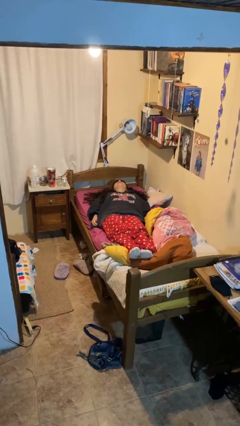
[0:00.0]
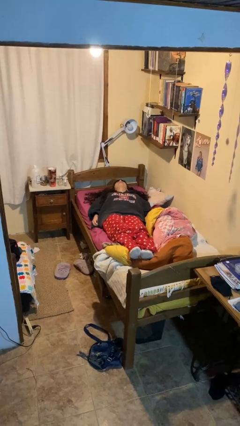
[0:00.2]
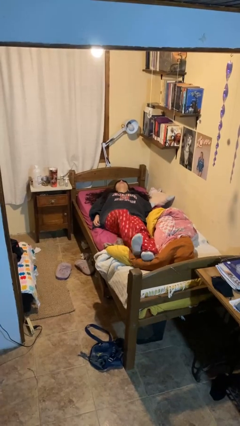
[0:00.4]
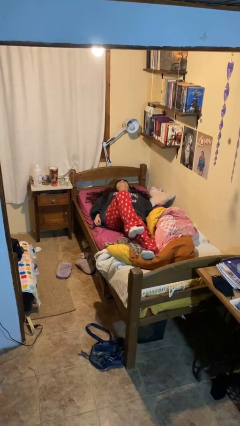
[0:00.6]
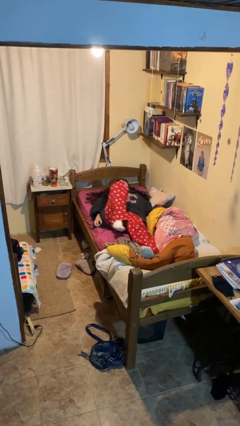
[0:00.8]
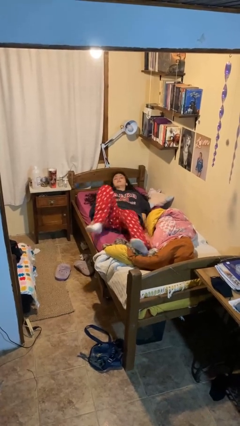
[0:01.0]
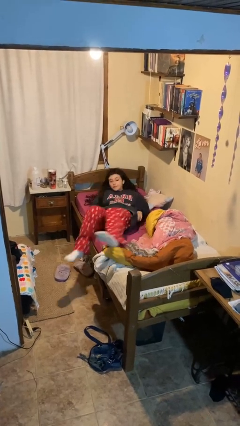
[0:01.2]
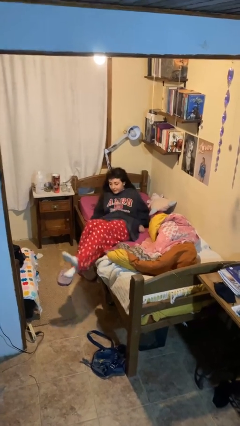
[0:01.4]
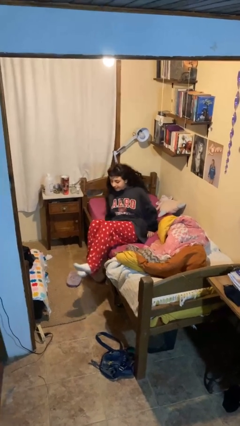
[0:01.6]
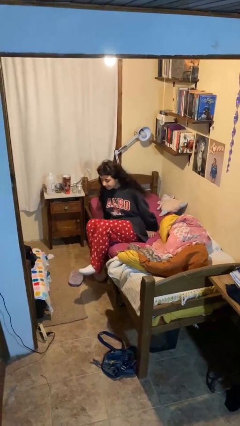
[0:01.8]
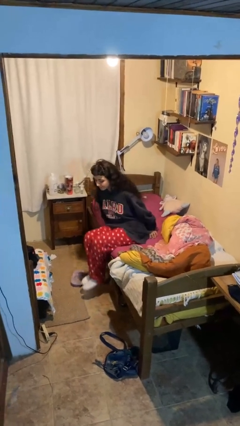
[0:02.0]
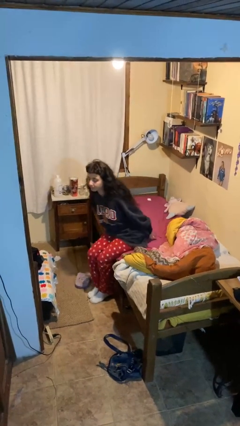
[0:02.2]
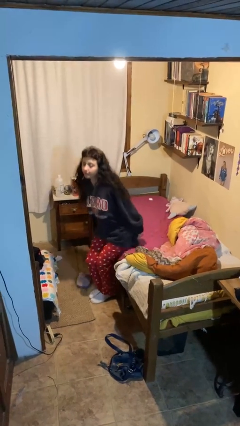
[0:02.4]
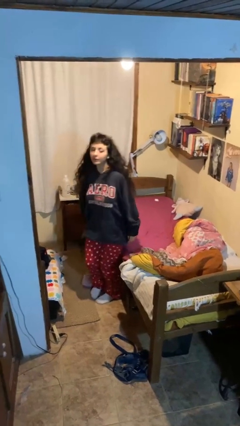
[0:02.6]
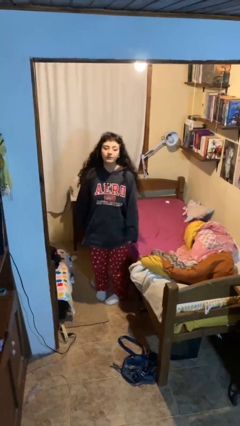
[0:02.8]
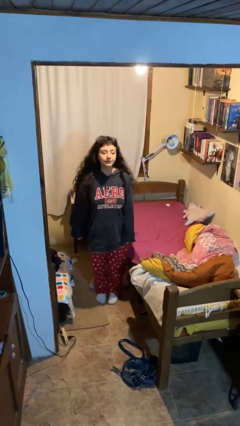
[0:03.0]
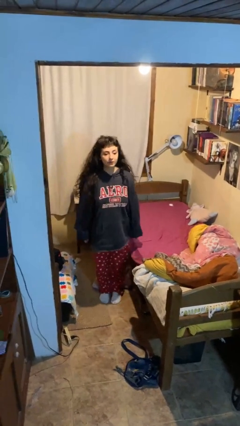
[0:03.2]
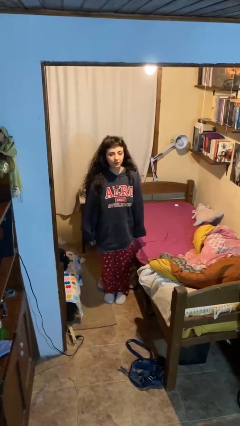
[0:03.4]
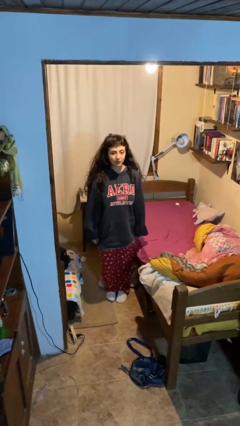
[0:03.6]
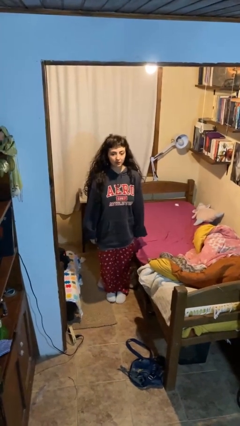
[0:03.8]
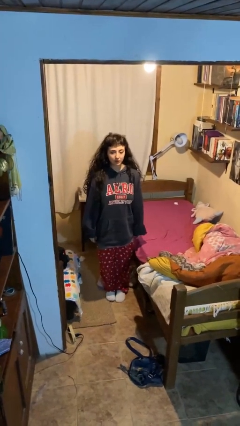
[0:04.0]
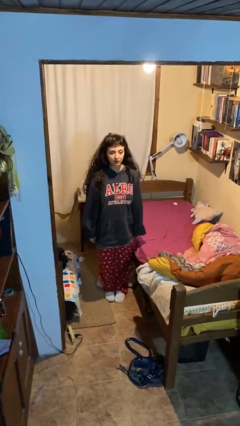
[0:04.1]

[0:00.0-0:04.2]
person stands up

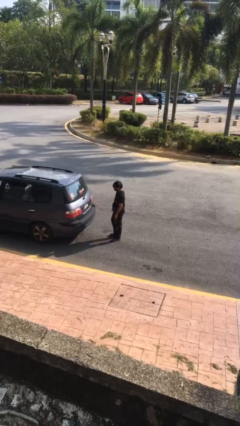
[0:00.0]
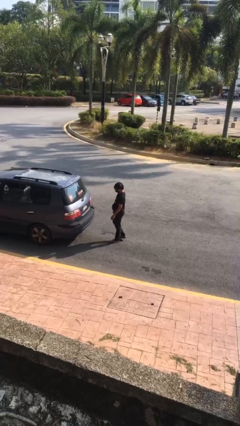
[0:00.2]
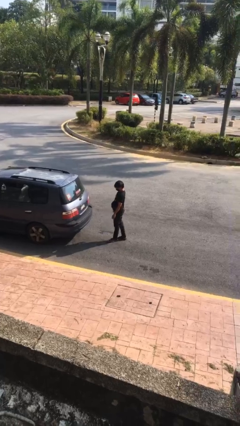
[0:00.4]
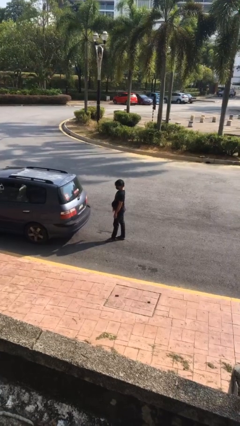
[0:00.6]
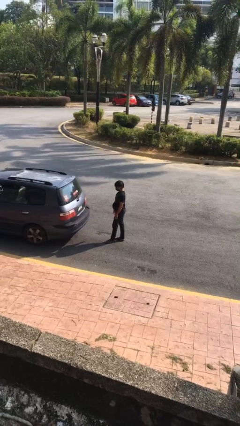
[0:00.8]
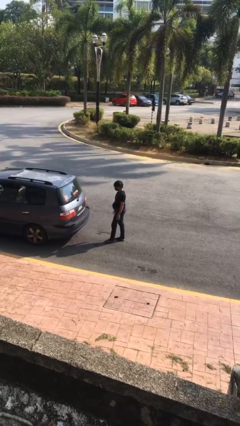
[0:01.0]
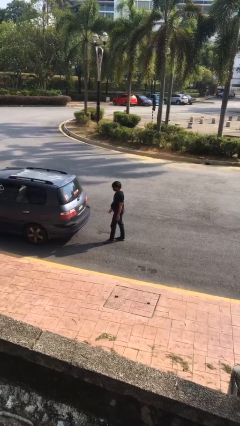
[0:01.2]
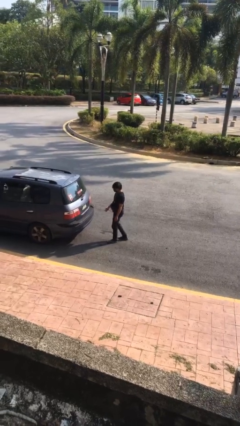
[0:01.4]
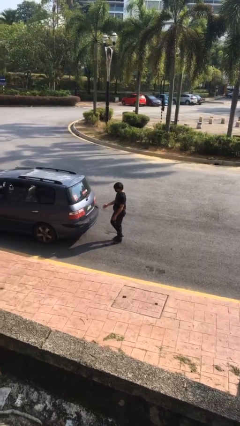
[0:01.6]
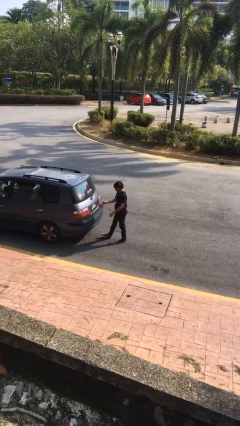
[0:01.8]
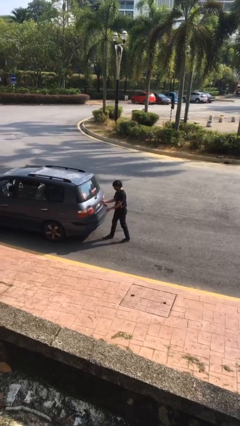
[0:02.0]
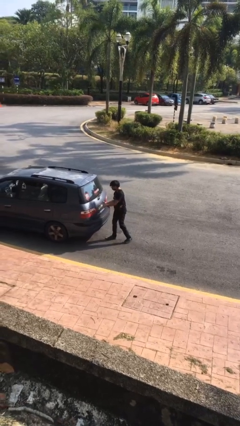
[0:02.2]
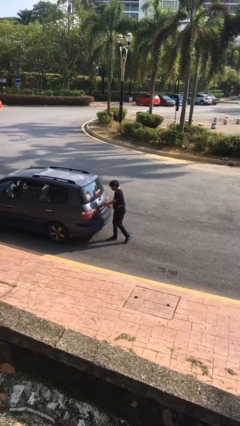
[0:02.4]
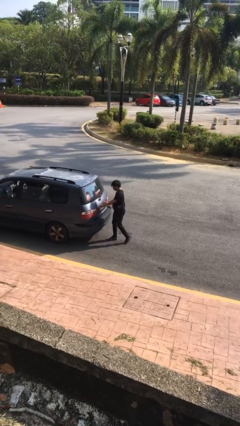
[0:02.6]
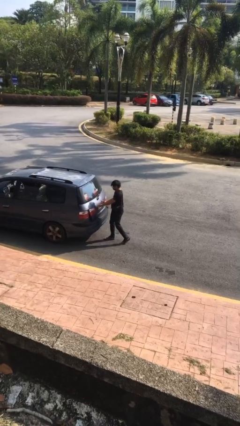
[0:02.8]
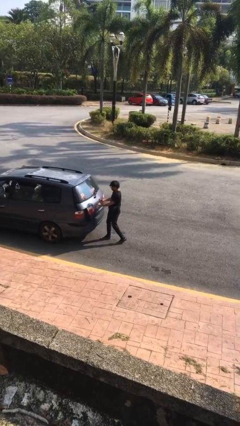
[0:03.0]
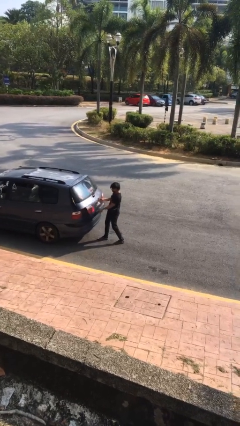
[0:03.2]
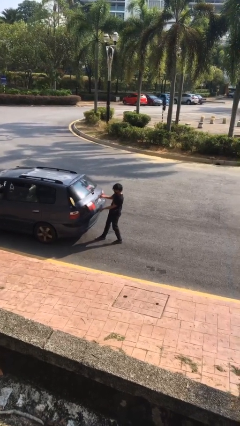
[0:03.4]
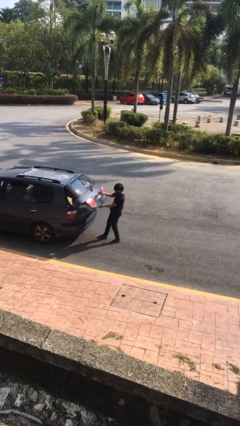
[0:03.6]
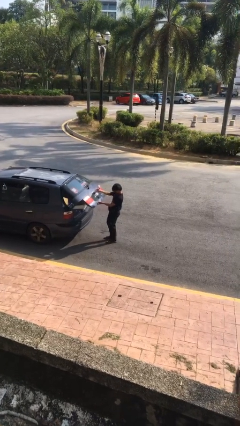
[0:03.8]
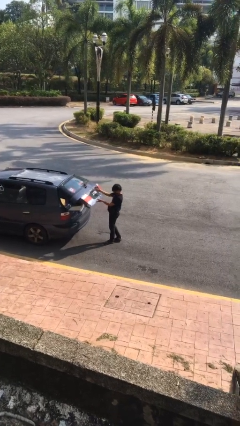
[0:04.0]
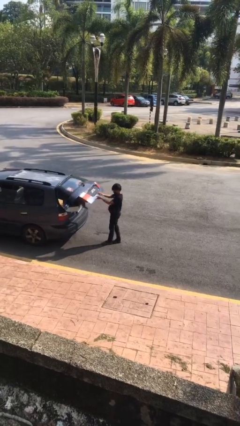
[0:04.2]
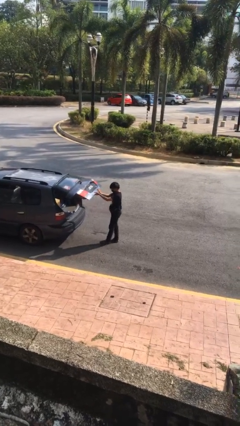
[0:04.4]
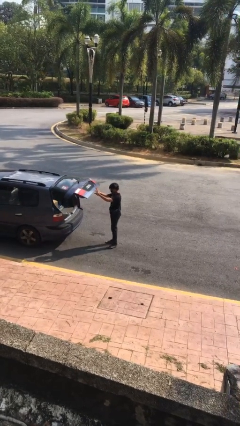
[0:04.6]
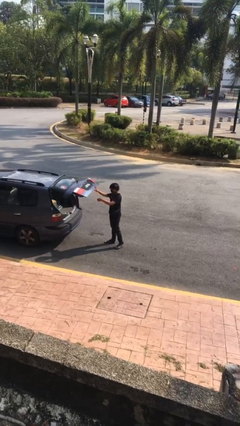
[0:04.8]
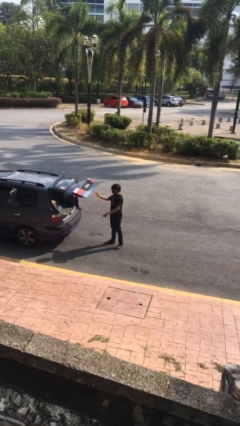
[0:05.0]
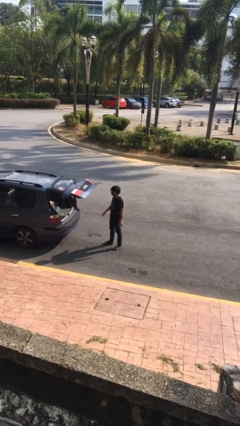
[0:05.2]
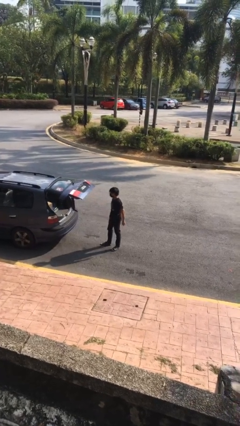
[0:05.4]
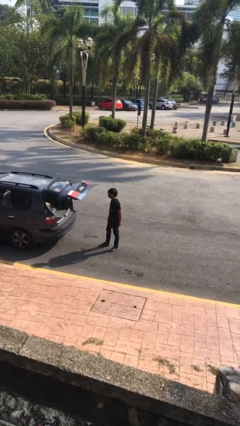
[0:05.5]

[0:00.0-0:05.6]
person opens car trunk

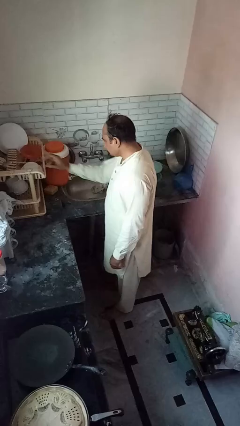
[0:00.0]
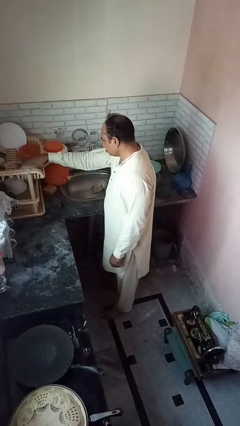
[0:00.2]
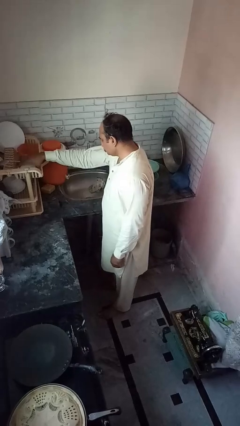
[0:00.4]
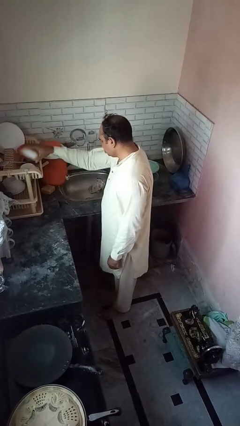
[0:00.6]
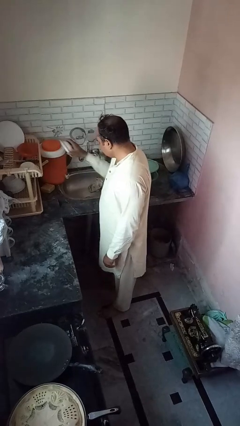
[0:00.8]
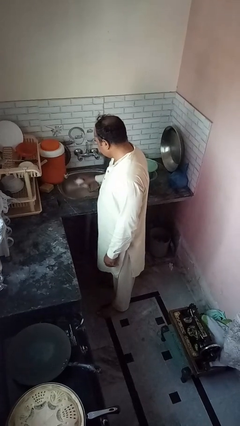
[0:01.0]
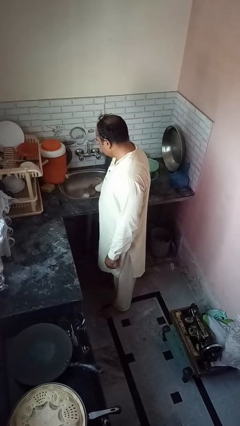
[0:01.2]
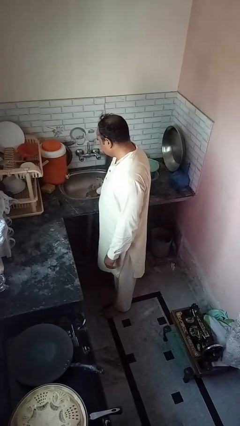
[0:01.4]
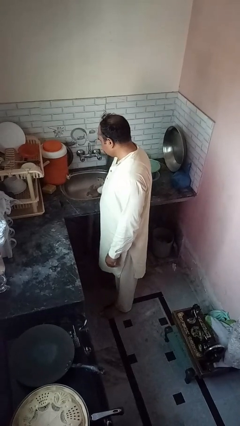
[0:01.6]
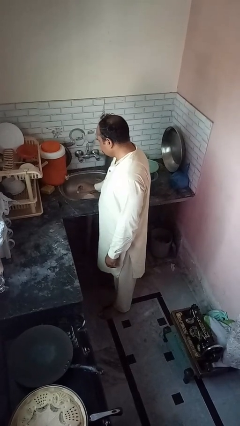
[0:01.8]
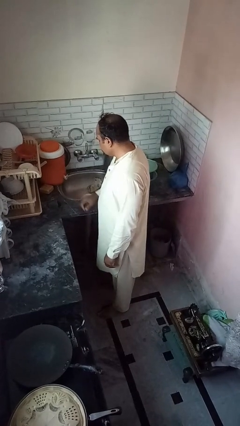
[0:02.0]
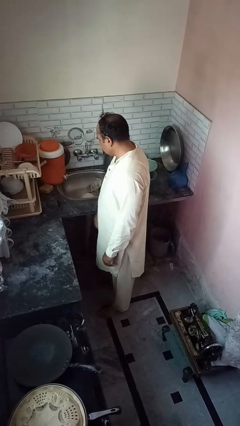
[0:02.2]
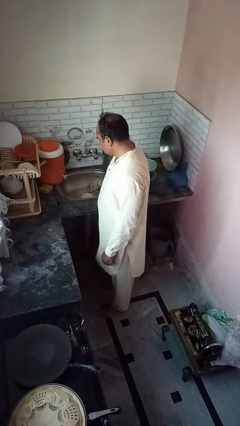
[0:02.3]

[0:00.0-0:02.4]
person loads dishwasher

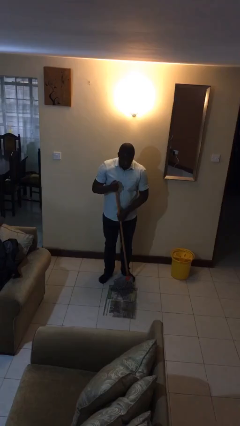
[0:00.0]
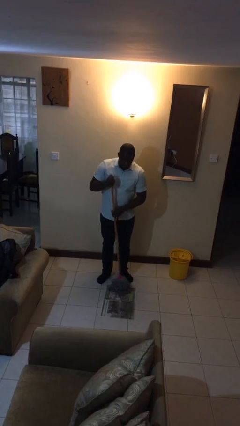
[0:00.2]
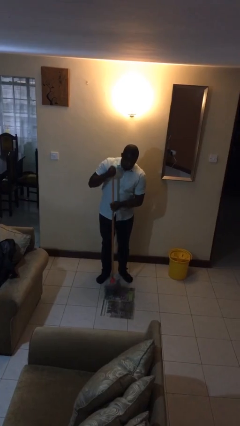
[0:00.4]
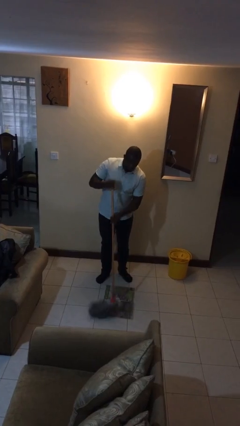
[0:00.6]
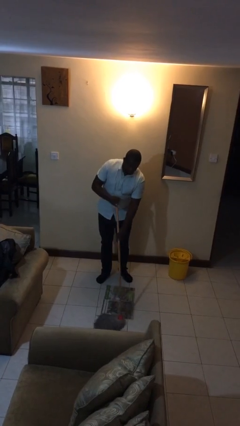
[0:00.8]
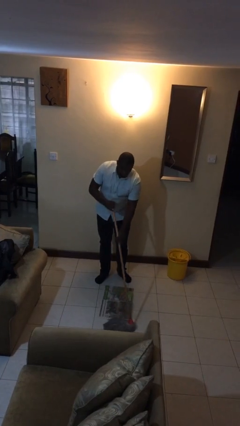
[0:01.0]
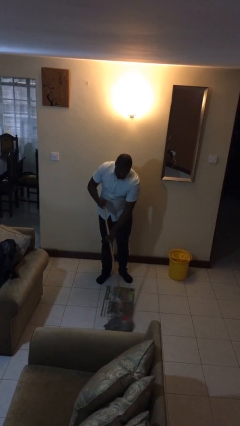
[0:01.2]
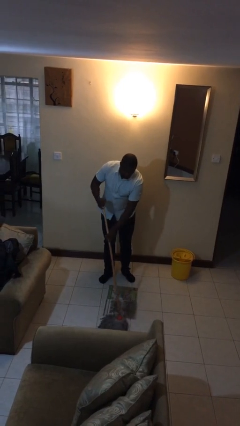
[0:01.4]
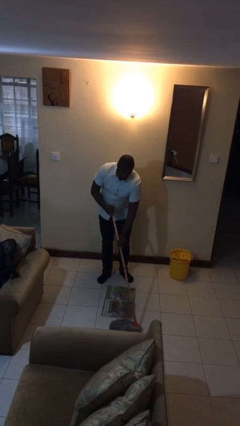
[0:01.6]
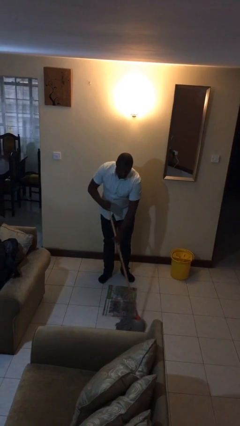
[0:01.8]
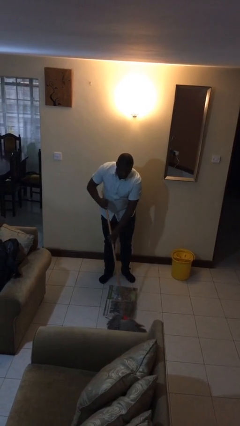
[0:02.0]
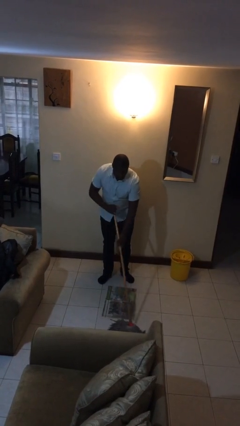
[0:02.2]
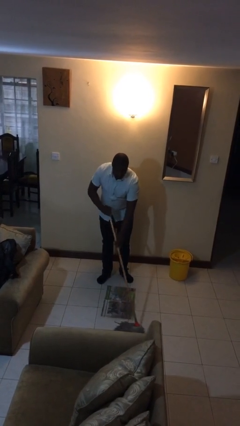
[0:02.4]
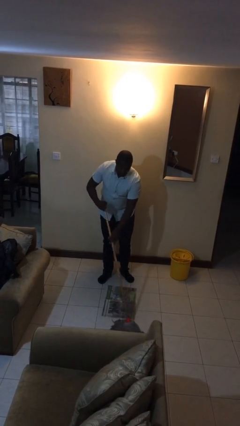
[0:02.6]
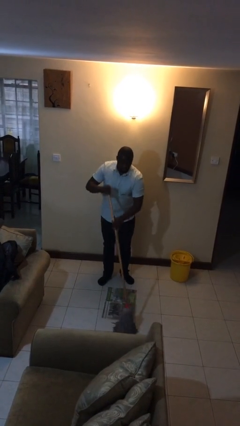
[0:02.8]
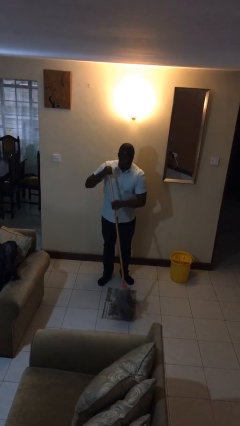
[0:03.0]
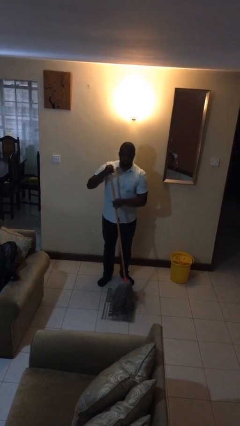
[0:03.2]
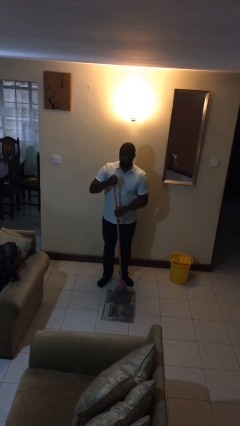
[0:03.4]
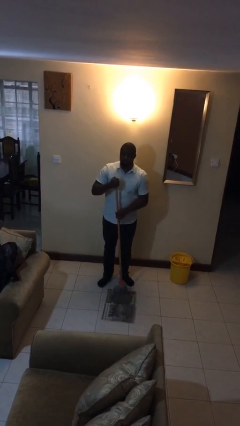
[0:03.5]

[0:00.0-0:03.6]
person mops

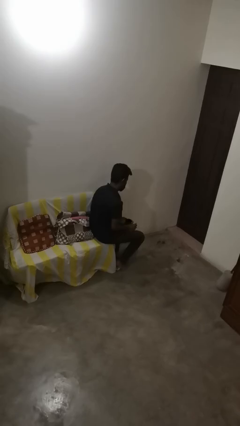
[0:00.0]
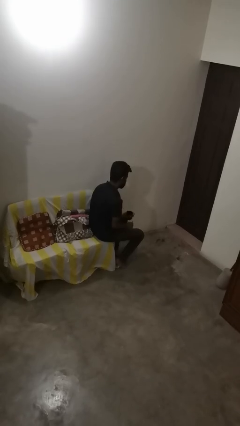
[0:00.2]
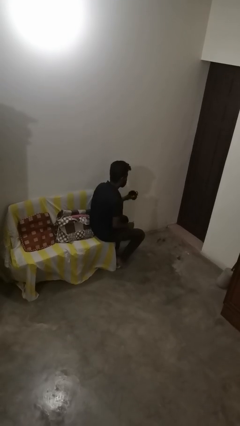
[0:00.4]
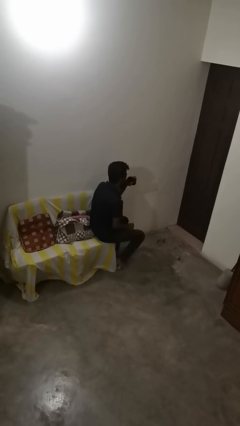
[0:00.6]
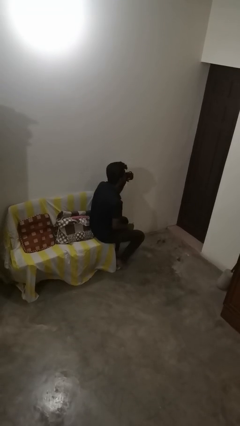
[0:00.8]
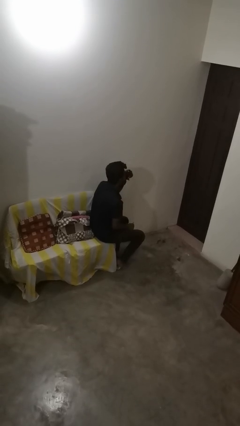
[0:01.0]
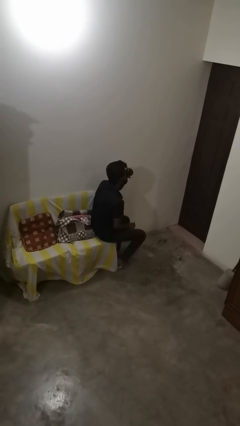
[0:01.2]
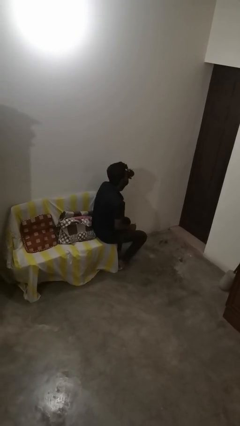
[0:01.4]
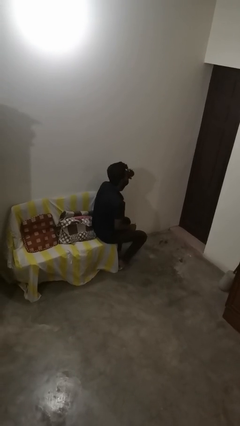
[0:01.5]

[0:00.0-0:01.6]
person drinks from mug

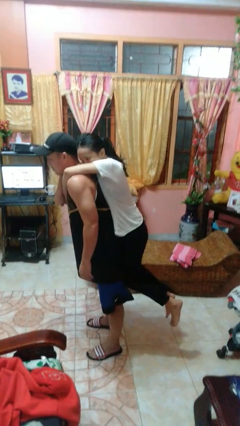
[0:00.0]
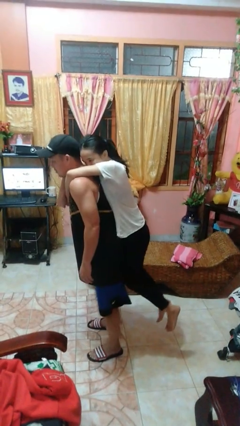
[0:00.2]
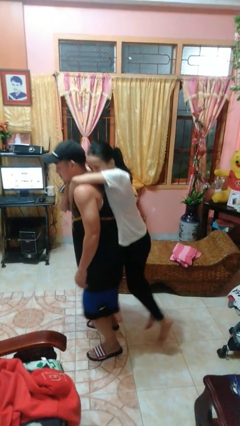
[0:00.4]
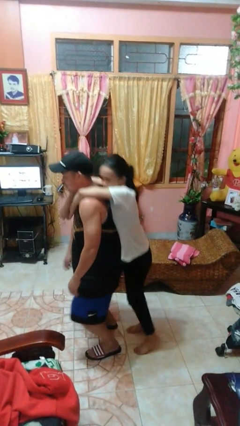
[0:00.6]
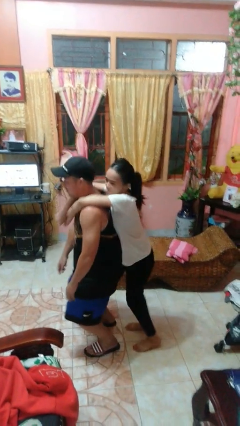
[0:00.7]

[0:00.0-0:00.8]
person puts down person
